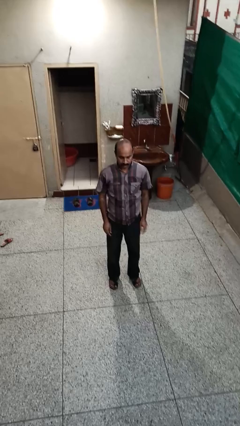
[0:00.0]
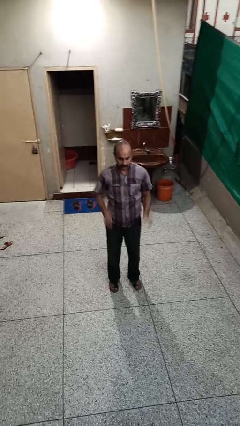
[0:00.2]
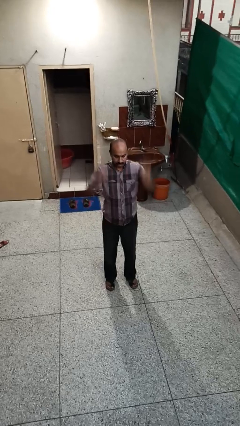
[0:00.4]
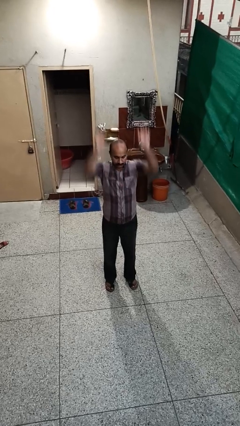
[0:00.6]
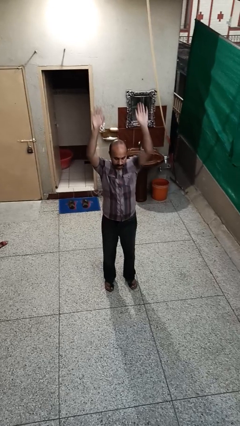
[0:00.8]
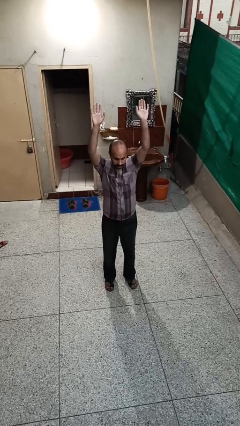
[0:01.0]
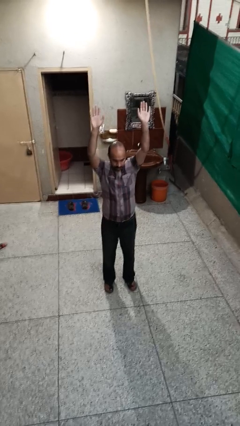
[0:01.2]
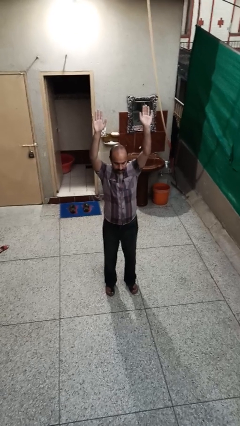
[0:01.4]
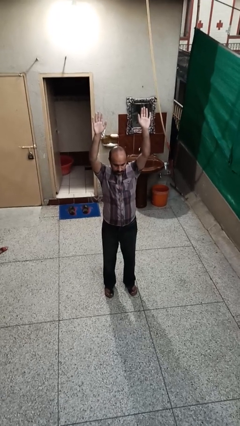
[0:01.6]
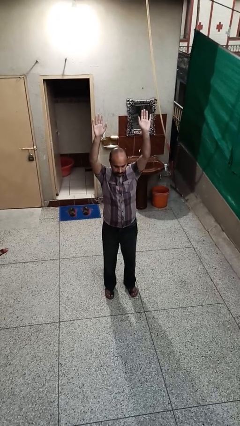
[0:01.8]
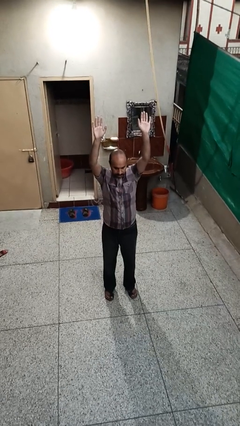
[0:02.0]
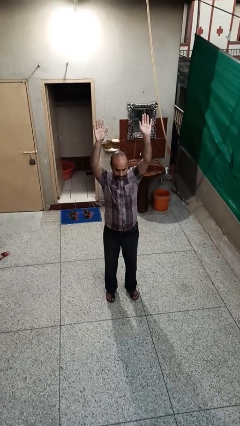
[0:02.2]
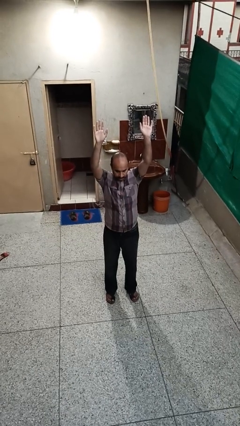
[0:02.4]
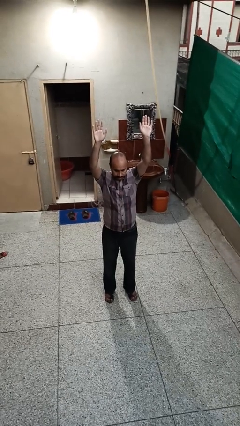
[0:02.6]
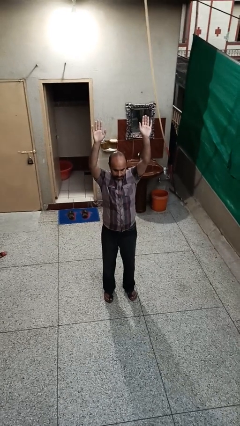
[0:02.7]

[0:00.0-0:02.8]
person stretches arms over head

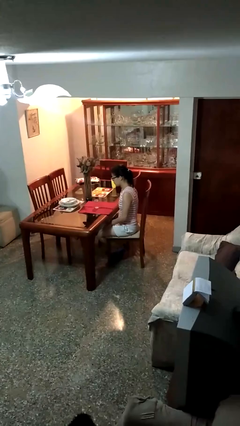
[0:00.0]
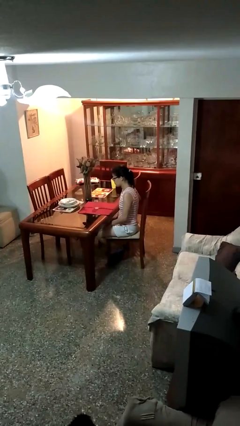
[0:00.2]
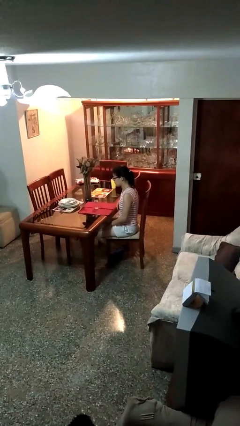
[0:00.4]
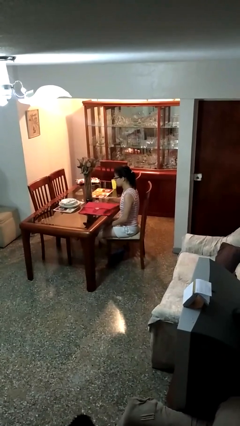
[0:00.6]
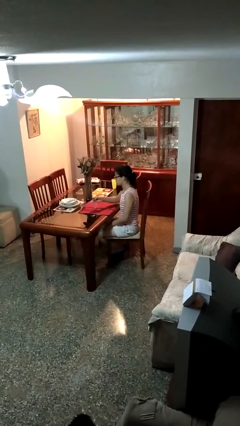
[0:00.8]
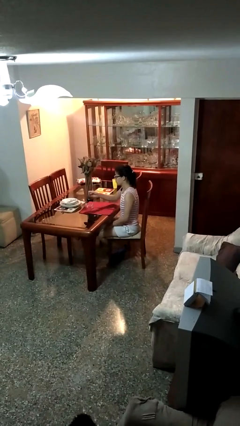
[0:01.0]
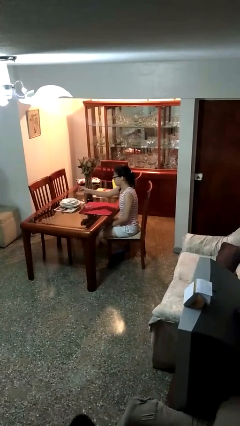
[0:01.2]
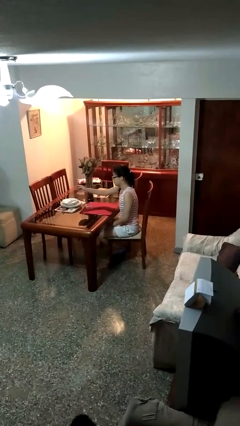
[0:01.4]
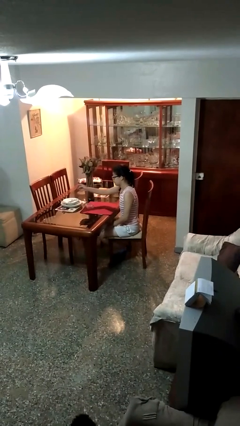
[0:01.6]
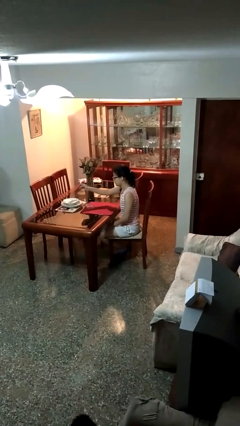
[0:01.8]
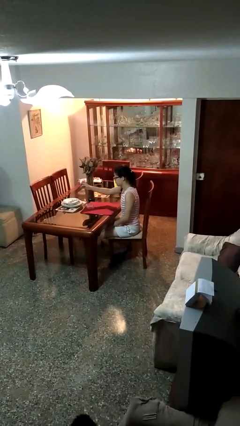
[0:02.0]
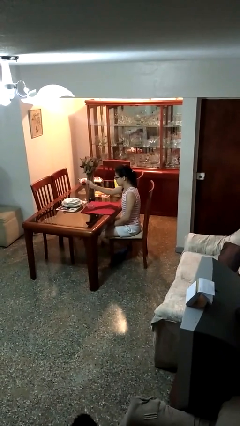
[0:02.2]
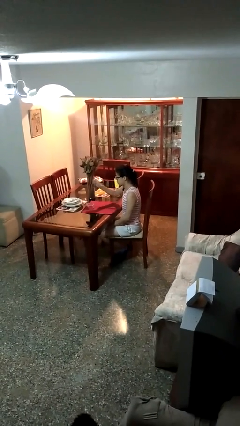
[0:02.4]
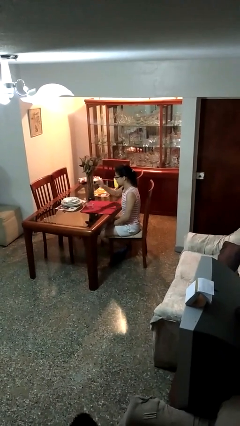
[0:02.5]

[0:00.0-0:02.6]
person knocks over glass

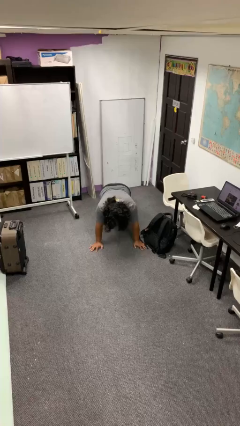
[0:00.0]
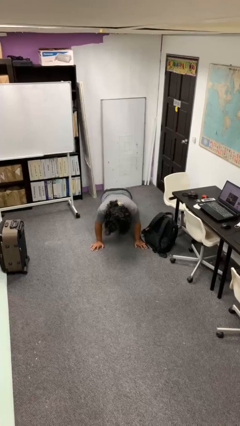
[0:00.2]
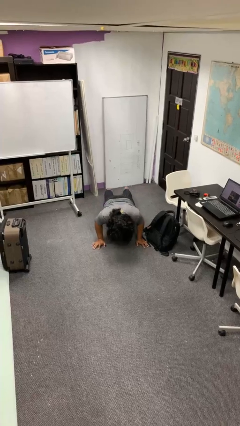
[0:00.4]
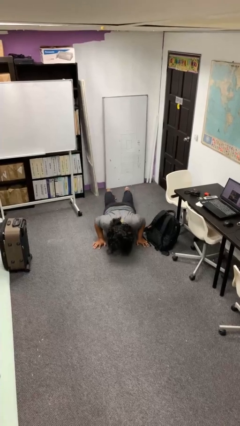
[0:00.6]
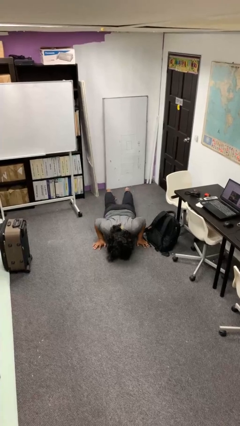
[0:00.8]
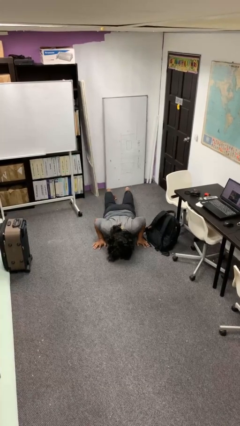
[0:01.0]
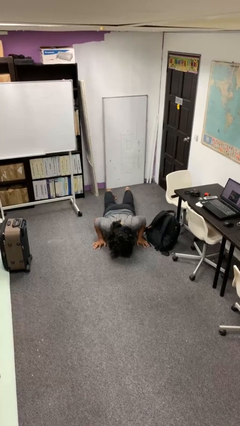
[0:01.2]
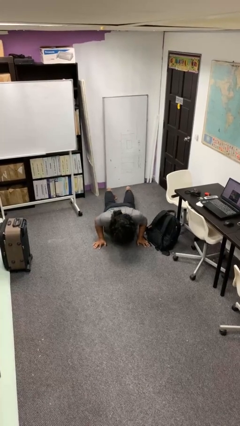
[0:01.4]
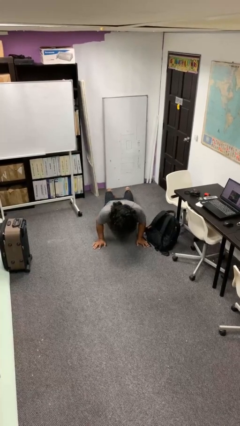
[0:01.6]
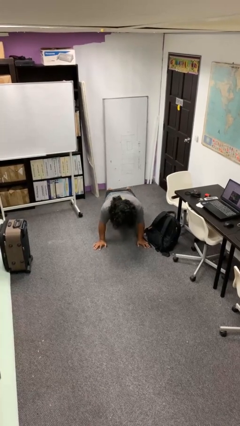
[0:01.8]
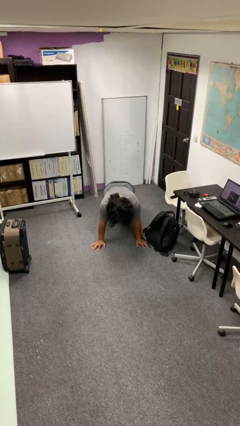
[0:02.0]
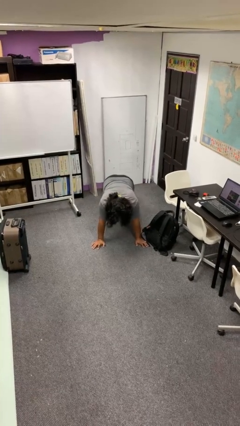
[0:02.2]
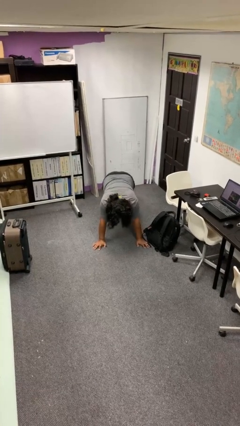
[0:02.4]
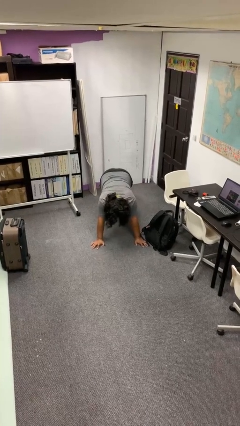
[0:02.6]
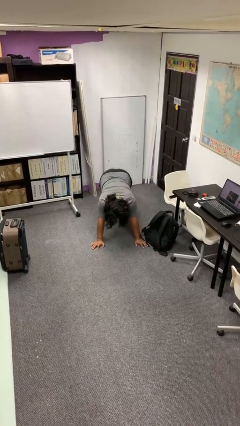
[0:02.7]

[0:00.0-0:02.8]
person exercises with pushup

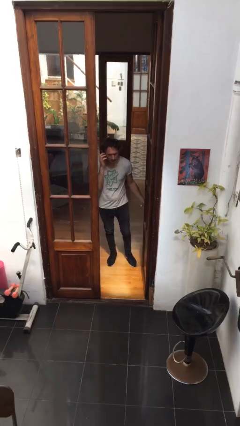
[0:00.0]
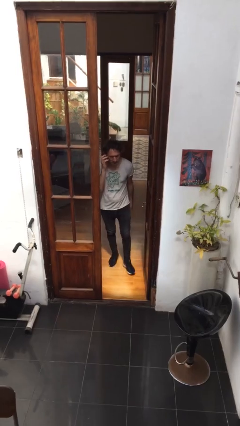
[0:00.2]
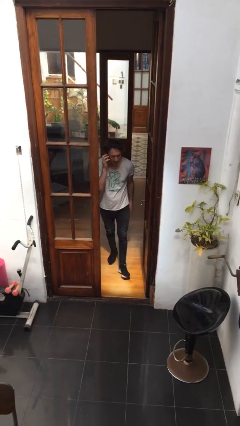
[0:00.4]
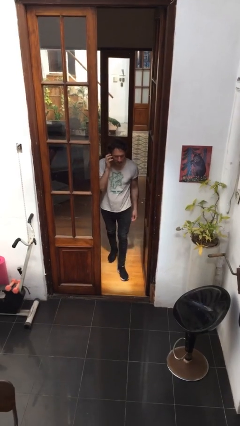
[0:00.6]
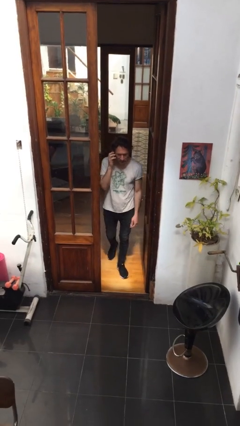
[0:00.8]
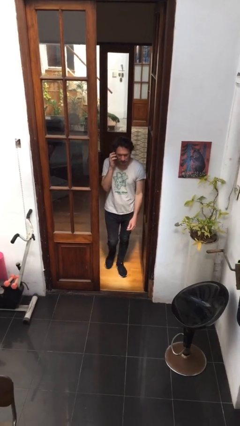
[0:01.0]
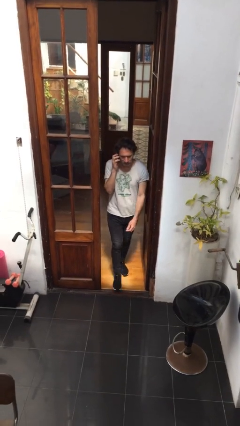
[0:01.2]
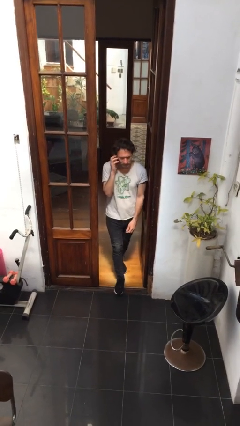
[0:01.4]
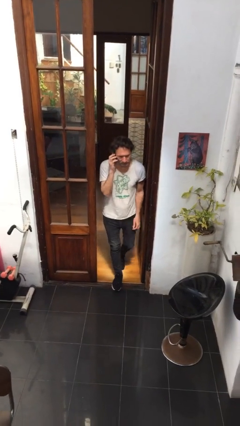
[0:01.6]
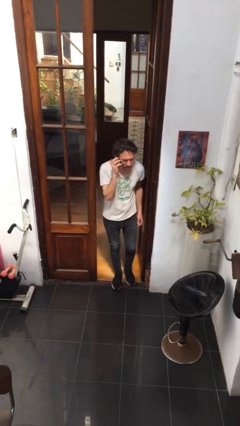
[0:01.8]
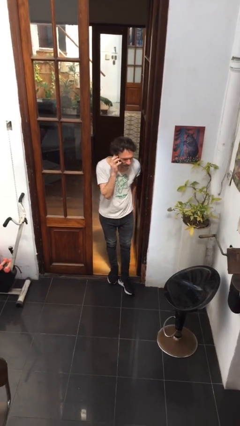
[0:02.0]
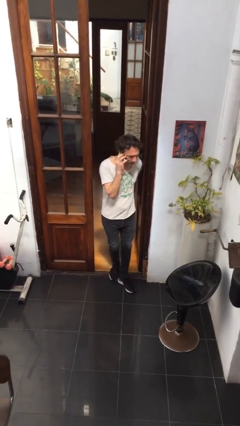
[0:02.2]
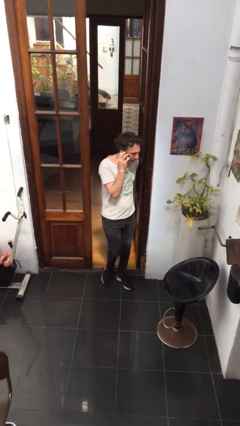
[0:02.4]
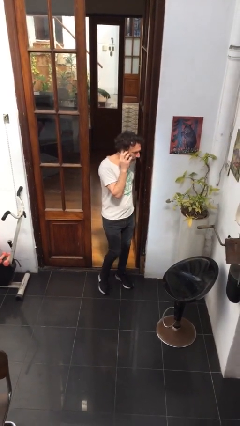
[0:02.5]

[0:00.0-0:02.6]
person enters scene through structure

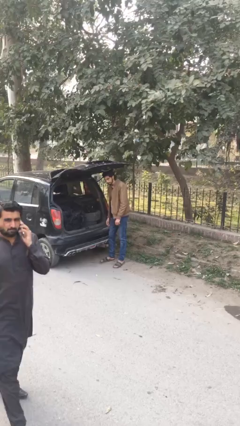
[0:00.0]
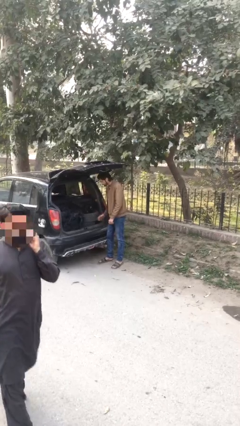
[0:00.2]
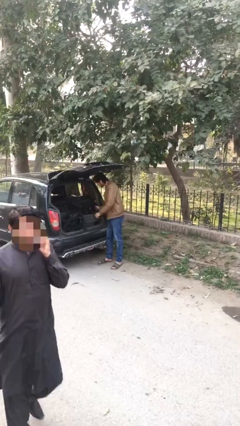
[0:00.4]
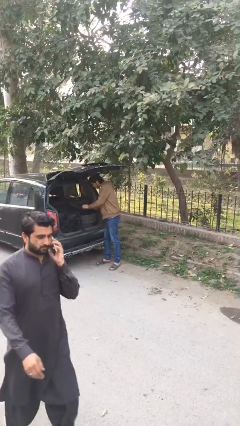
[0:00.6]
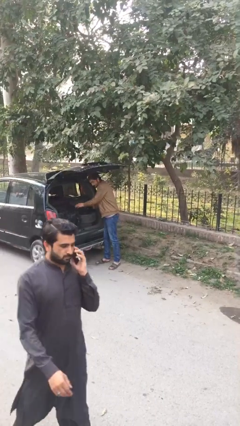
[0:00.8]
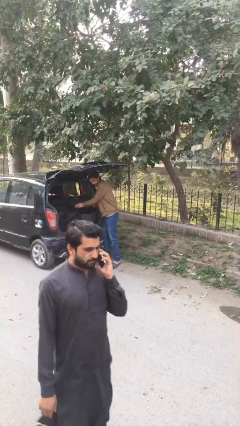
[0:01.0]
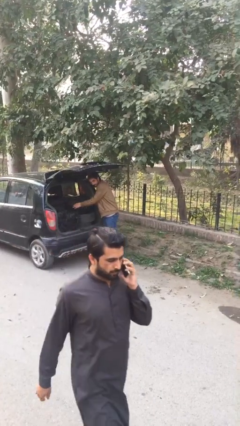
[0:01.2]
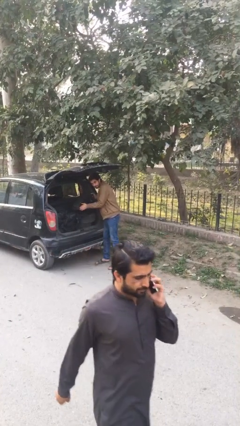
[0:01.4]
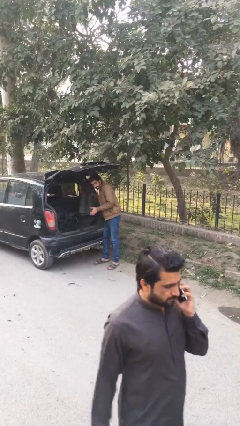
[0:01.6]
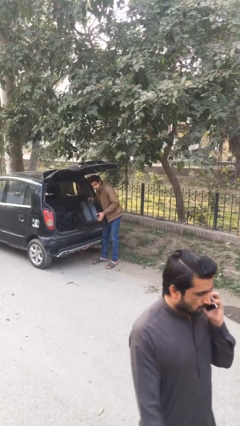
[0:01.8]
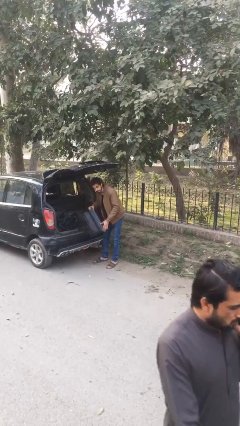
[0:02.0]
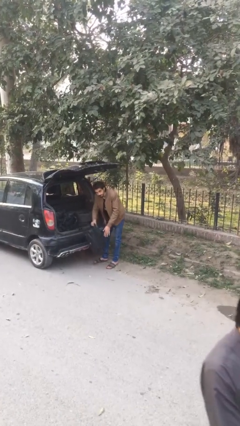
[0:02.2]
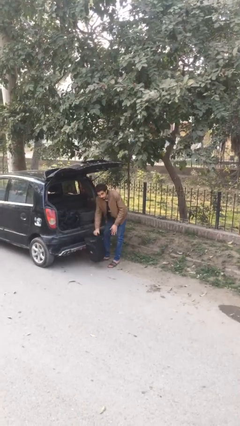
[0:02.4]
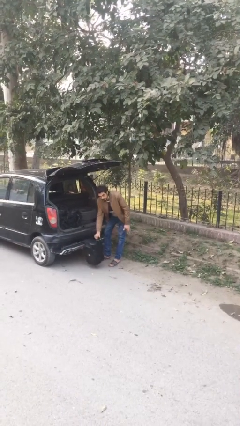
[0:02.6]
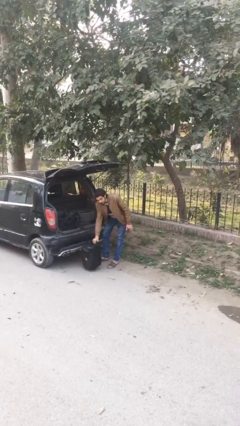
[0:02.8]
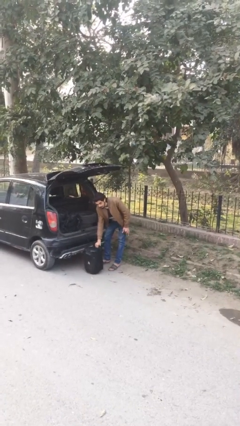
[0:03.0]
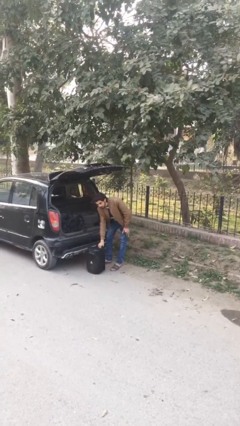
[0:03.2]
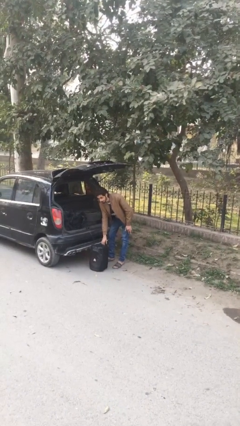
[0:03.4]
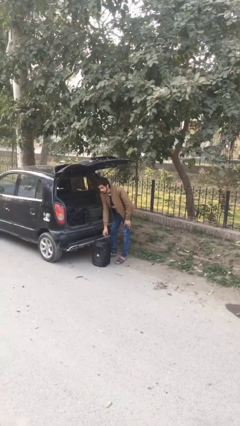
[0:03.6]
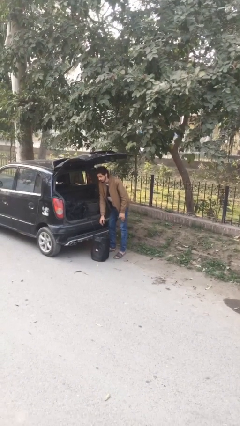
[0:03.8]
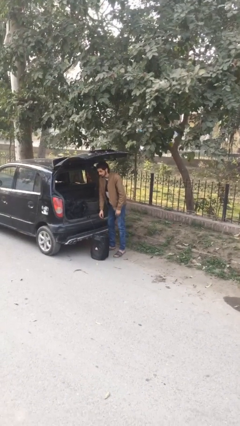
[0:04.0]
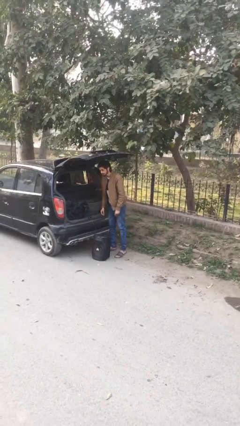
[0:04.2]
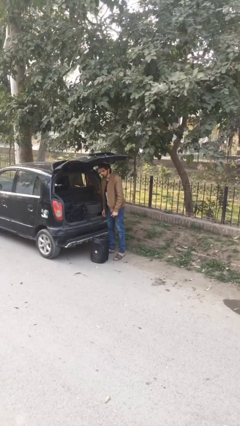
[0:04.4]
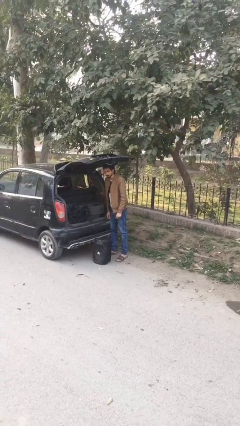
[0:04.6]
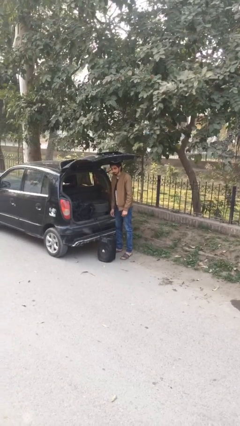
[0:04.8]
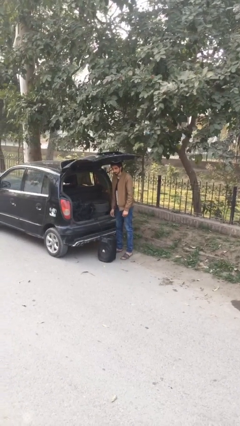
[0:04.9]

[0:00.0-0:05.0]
person unloads car

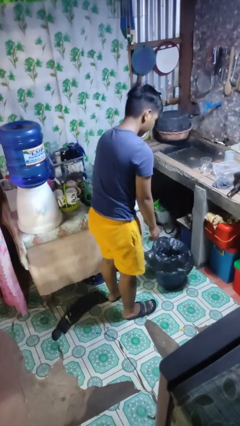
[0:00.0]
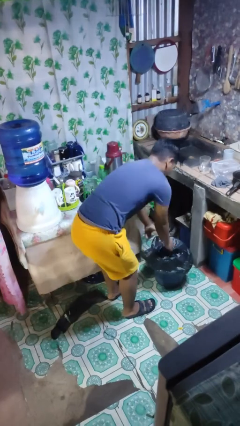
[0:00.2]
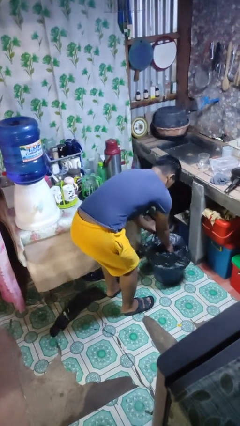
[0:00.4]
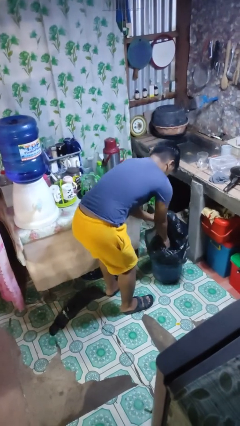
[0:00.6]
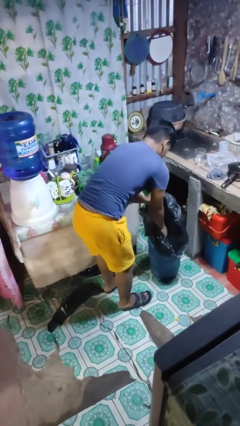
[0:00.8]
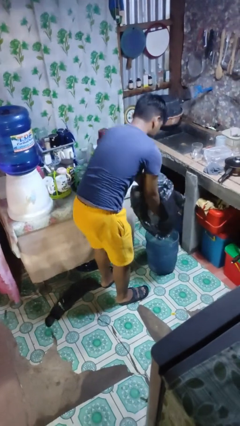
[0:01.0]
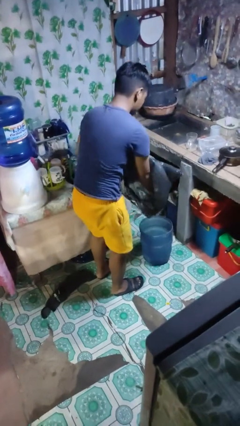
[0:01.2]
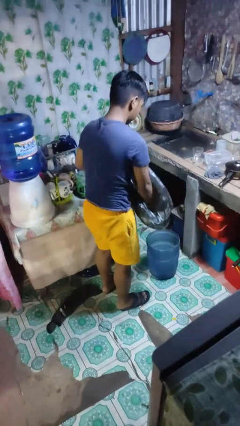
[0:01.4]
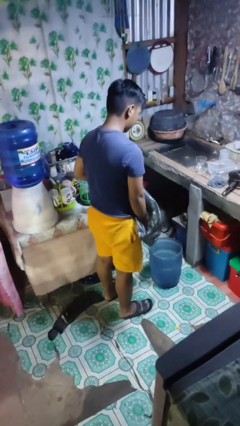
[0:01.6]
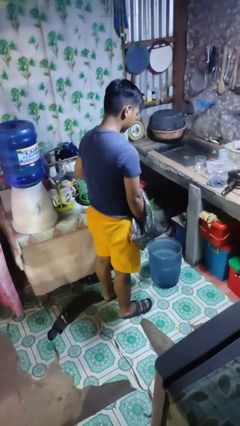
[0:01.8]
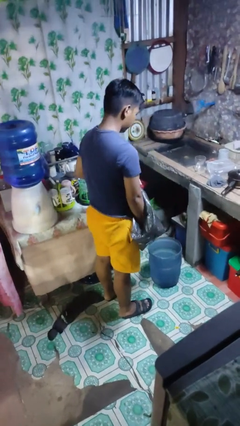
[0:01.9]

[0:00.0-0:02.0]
person removes trashbag from trashcan
